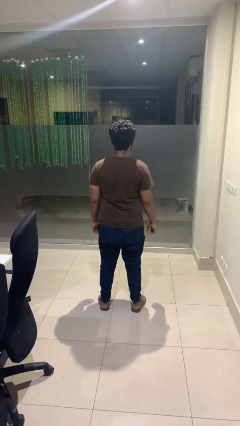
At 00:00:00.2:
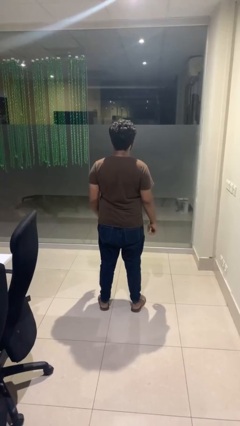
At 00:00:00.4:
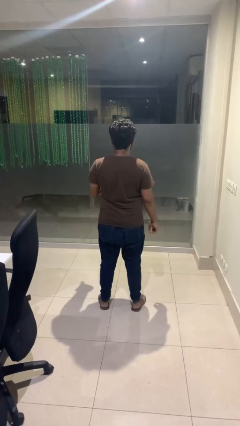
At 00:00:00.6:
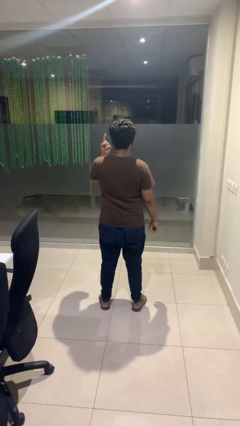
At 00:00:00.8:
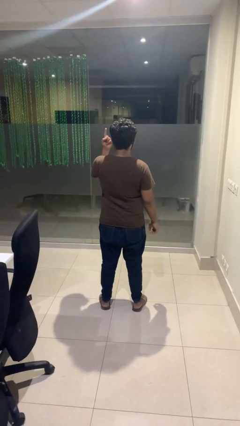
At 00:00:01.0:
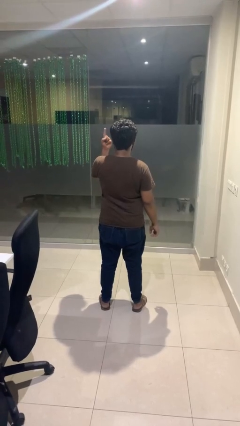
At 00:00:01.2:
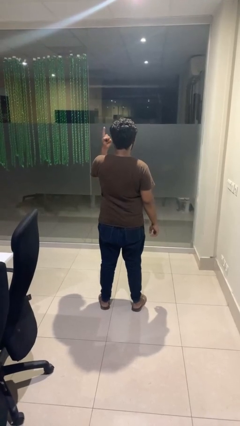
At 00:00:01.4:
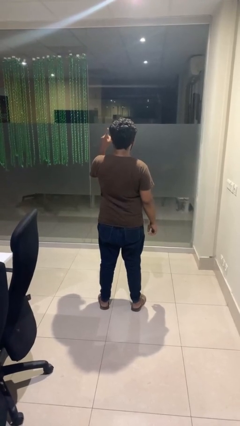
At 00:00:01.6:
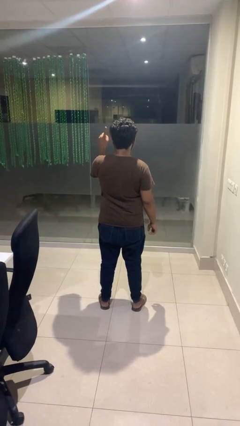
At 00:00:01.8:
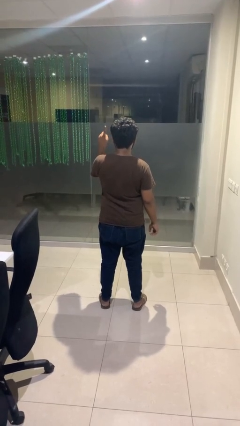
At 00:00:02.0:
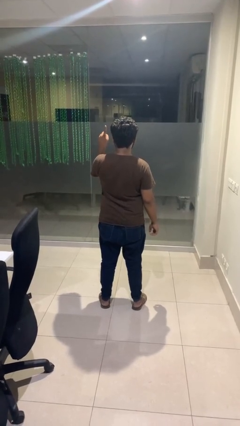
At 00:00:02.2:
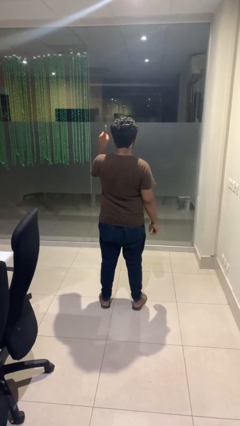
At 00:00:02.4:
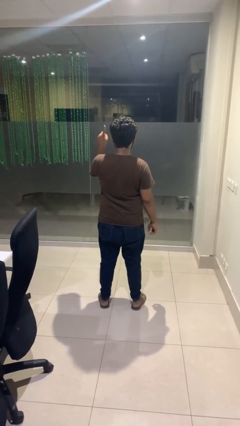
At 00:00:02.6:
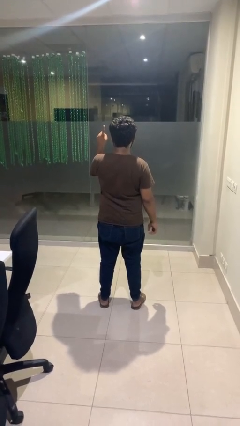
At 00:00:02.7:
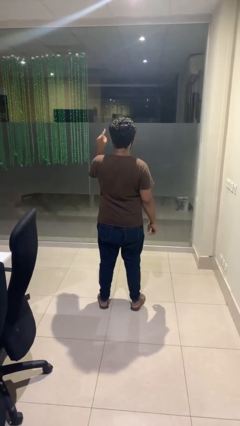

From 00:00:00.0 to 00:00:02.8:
person gestures number one

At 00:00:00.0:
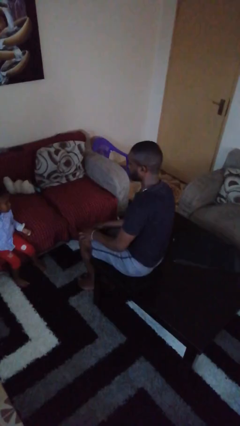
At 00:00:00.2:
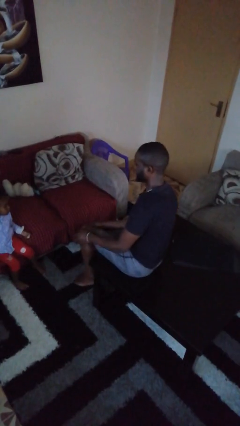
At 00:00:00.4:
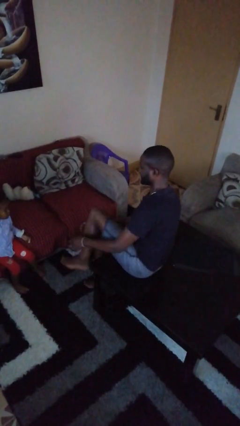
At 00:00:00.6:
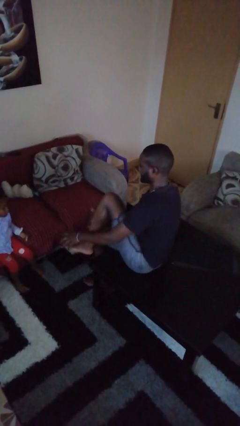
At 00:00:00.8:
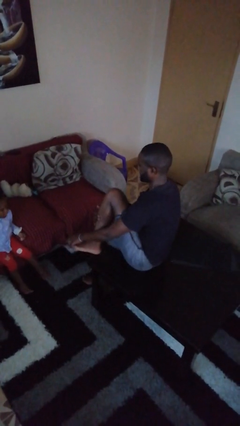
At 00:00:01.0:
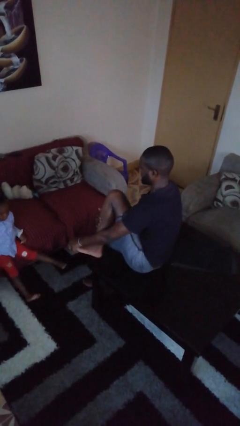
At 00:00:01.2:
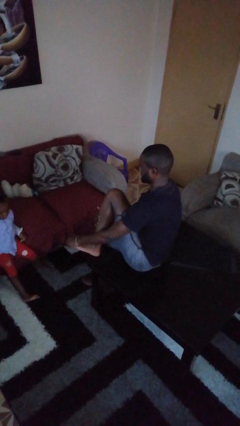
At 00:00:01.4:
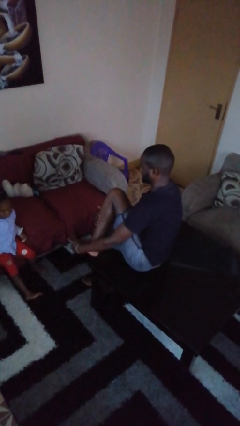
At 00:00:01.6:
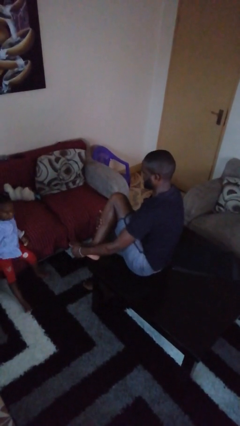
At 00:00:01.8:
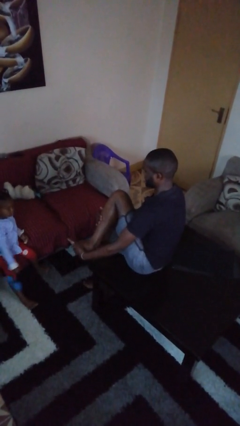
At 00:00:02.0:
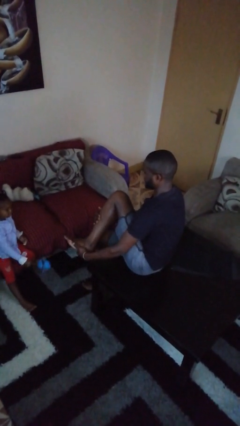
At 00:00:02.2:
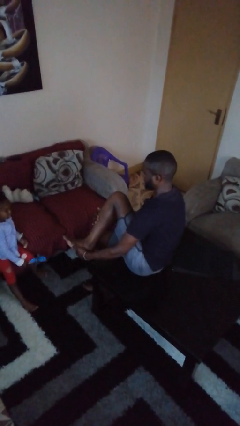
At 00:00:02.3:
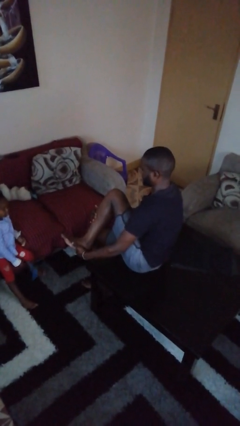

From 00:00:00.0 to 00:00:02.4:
person rubs foot

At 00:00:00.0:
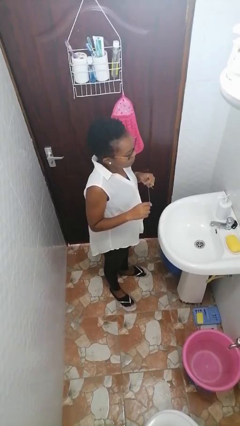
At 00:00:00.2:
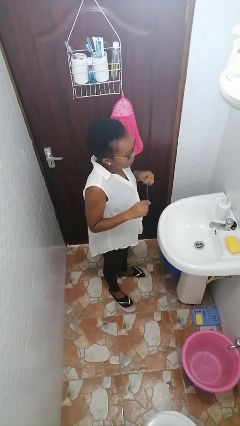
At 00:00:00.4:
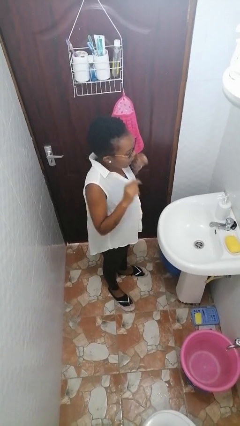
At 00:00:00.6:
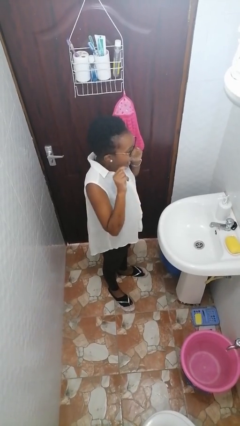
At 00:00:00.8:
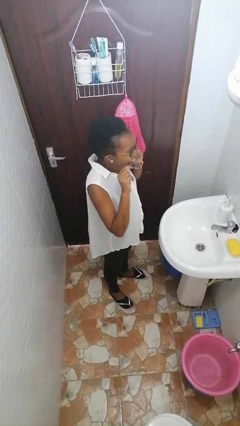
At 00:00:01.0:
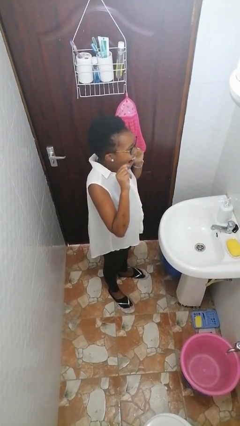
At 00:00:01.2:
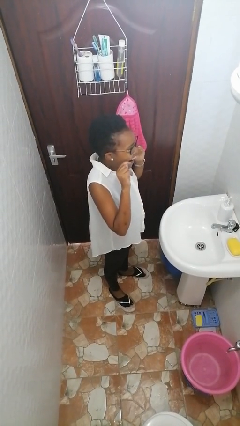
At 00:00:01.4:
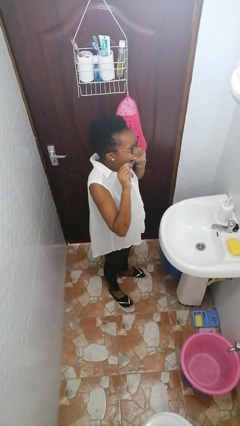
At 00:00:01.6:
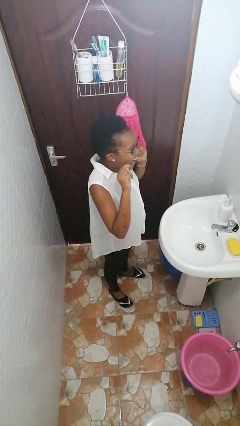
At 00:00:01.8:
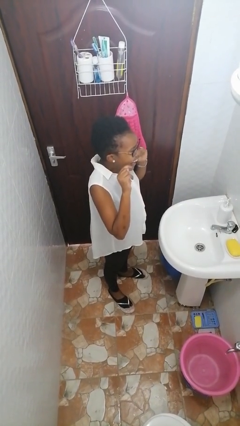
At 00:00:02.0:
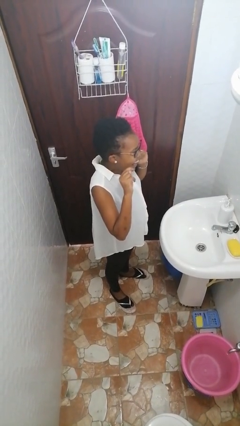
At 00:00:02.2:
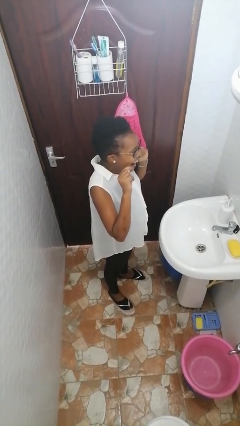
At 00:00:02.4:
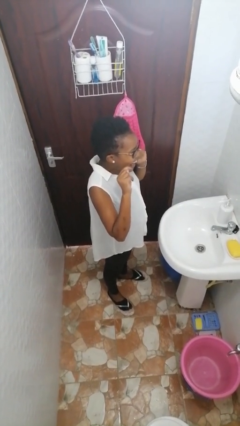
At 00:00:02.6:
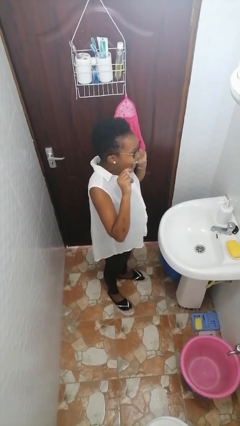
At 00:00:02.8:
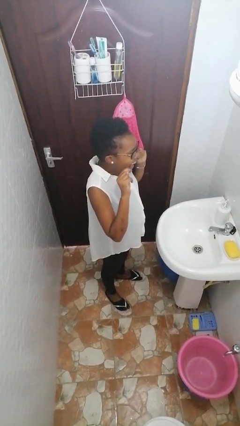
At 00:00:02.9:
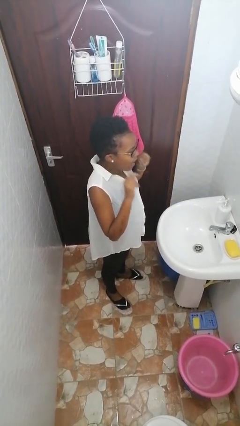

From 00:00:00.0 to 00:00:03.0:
person flosses

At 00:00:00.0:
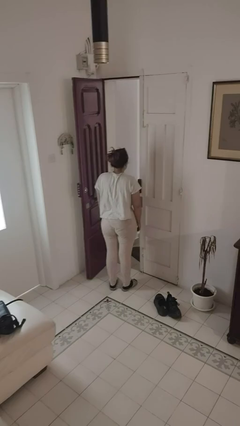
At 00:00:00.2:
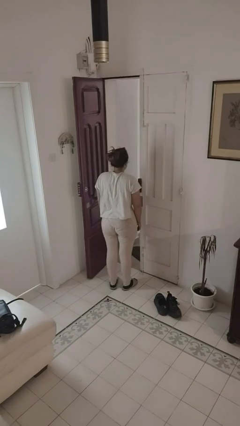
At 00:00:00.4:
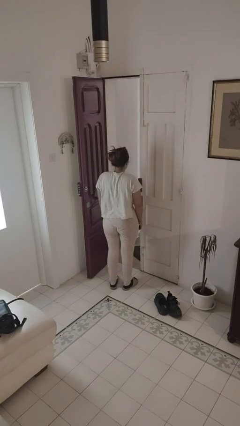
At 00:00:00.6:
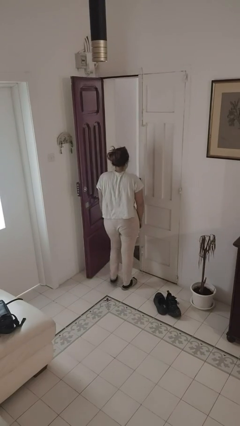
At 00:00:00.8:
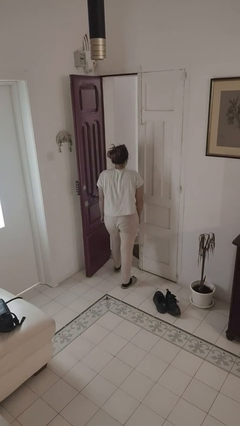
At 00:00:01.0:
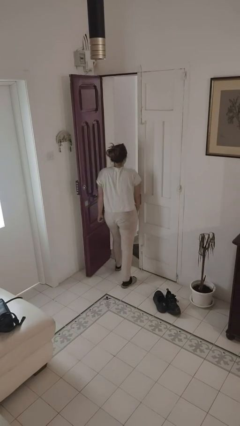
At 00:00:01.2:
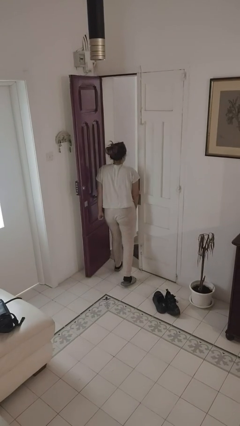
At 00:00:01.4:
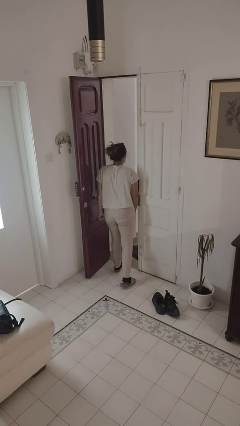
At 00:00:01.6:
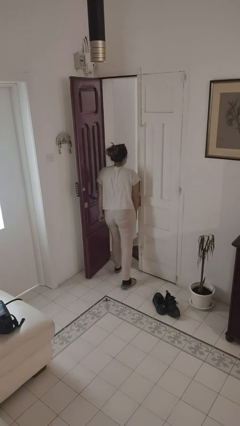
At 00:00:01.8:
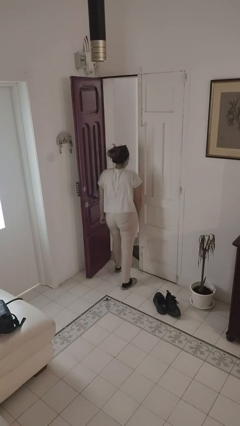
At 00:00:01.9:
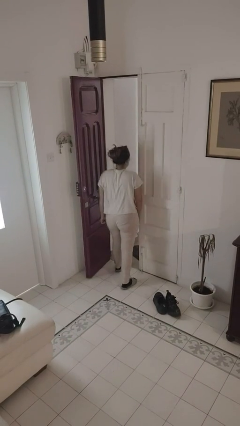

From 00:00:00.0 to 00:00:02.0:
person bumps into wall

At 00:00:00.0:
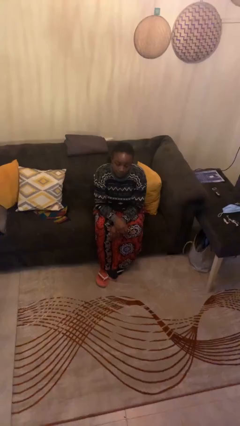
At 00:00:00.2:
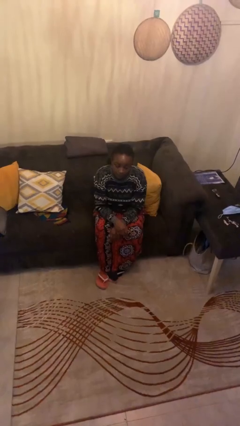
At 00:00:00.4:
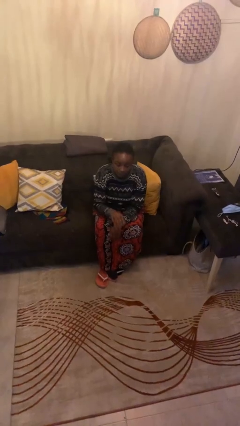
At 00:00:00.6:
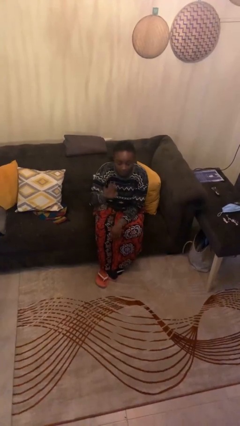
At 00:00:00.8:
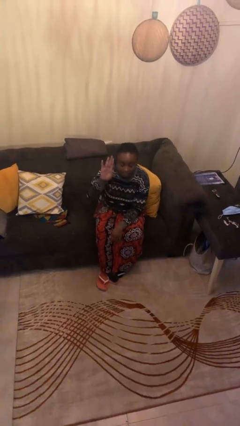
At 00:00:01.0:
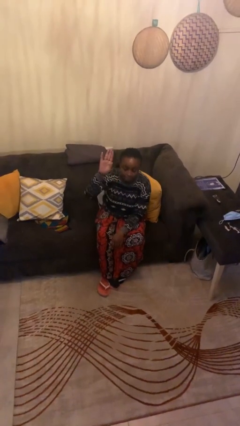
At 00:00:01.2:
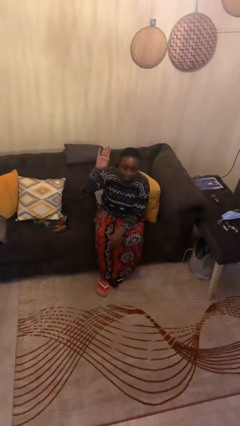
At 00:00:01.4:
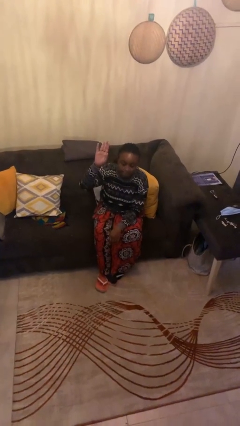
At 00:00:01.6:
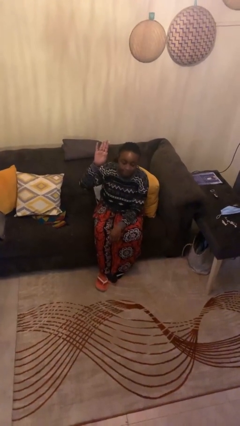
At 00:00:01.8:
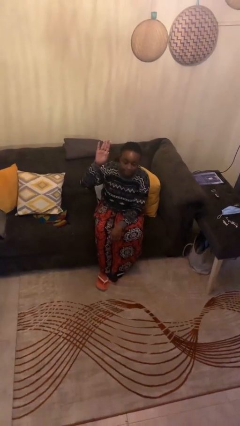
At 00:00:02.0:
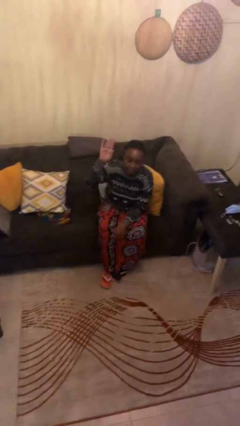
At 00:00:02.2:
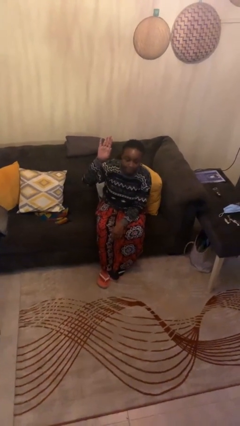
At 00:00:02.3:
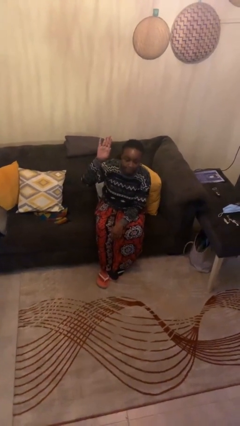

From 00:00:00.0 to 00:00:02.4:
person gestures raise hand

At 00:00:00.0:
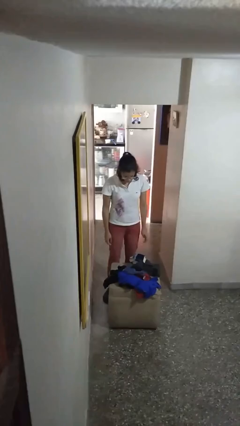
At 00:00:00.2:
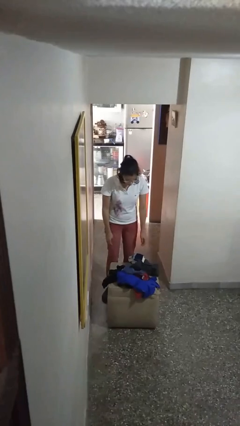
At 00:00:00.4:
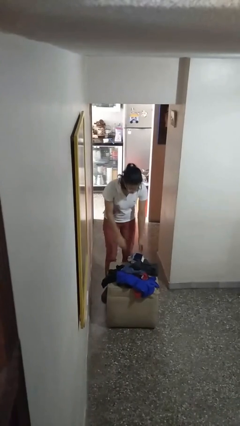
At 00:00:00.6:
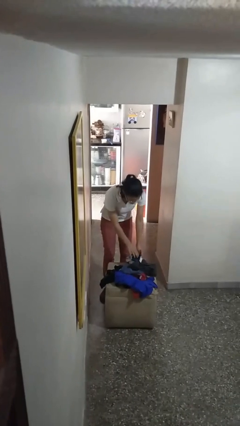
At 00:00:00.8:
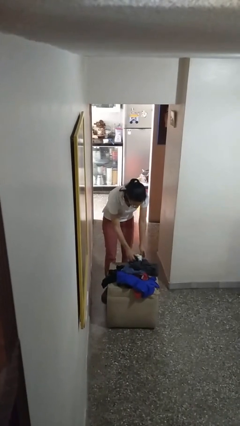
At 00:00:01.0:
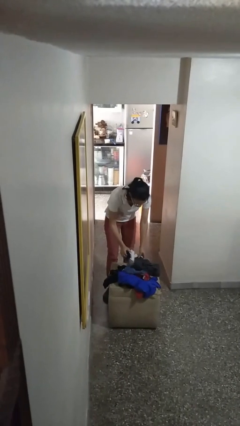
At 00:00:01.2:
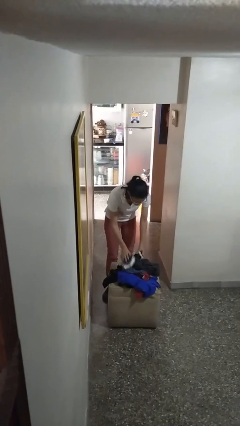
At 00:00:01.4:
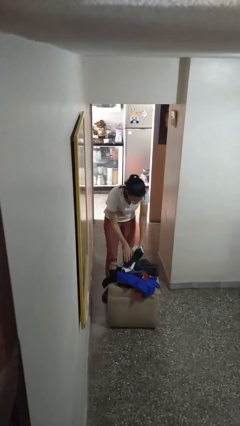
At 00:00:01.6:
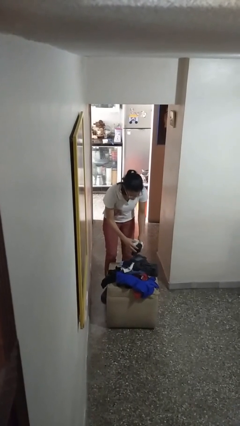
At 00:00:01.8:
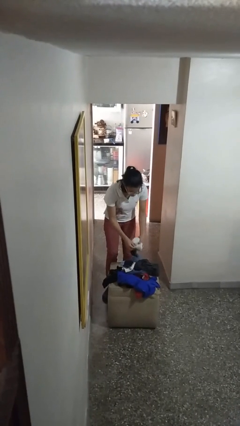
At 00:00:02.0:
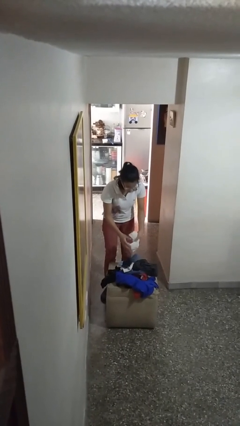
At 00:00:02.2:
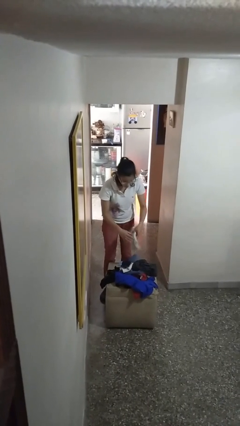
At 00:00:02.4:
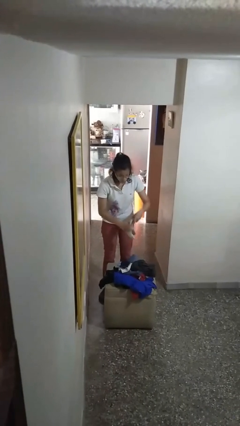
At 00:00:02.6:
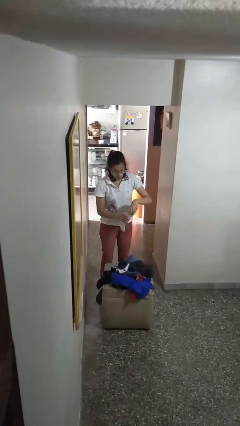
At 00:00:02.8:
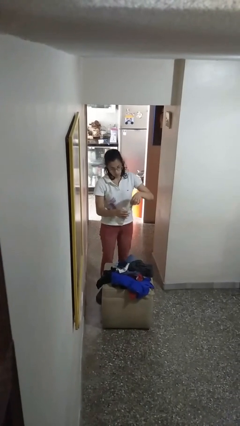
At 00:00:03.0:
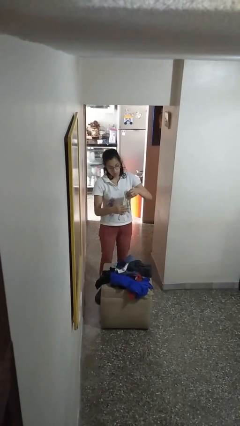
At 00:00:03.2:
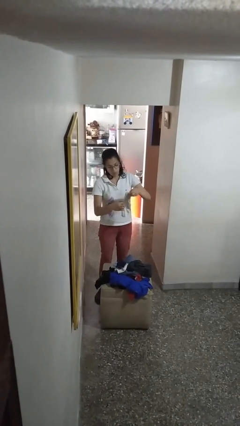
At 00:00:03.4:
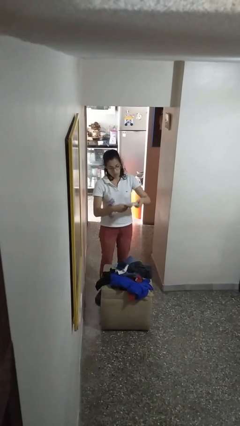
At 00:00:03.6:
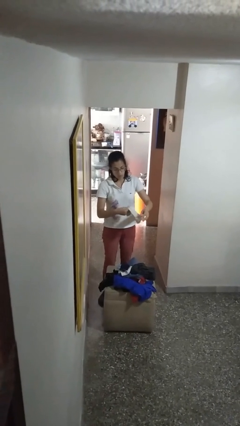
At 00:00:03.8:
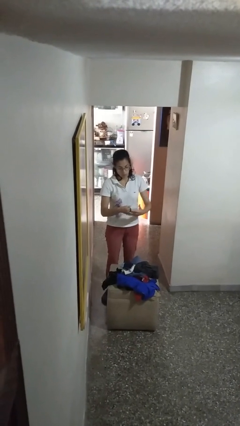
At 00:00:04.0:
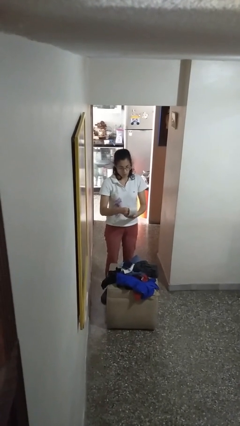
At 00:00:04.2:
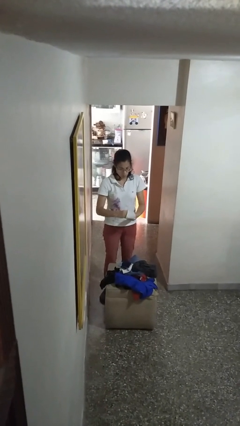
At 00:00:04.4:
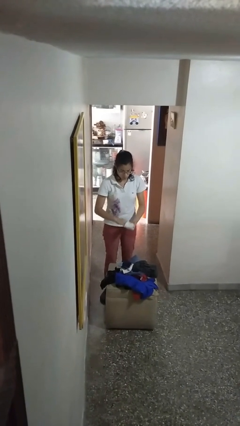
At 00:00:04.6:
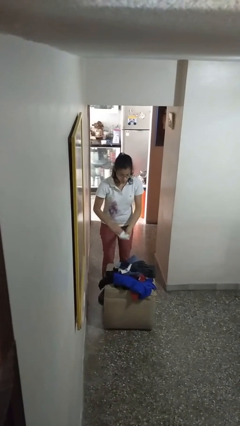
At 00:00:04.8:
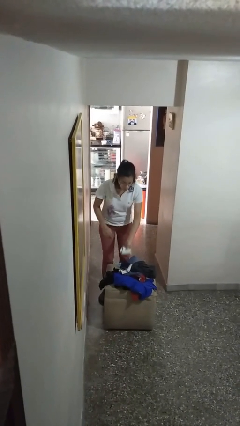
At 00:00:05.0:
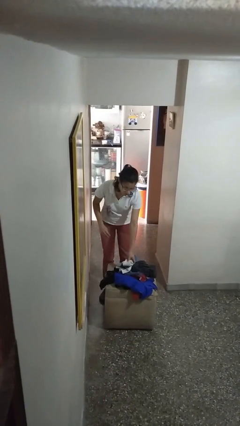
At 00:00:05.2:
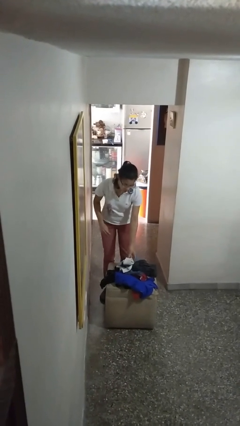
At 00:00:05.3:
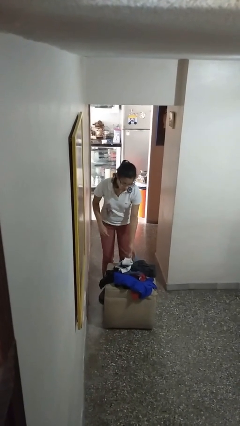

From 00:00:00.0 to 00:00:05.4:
person folds socks
